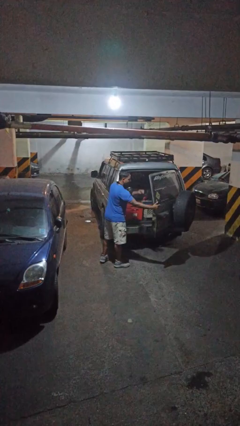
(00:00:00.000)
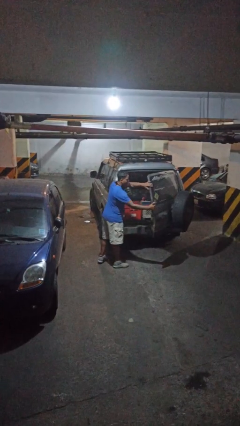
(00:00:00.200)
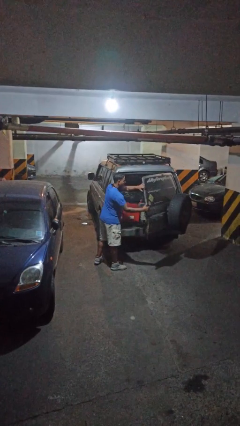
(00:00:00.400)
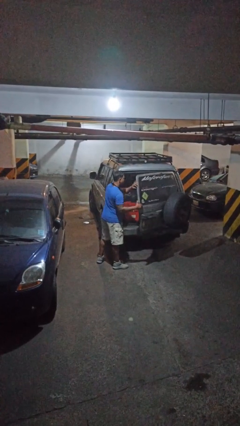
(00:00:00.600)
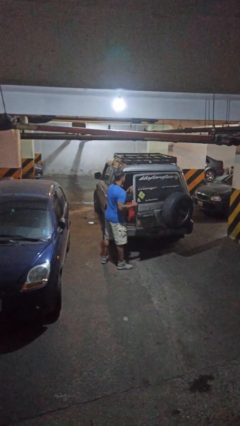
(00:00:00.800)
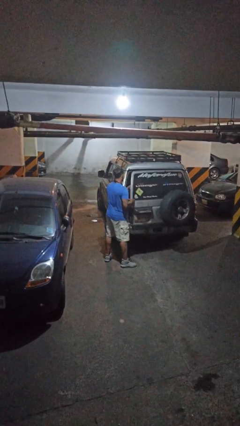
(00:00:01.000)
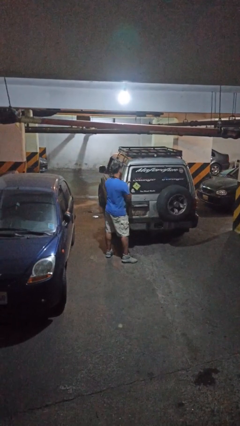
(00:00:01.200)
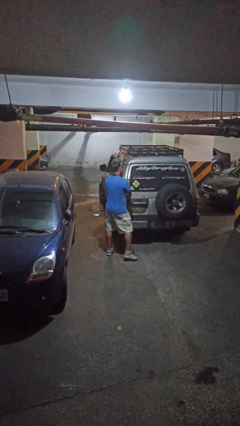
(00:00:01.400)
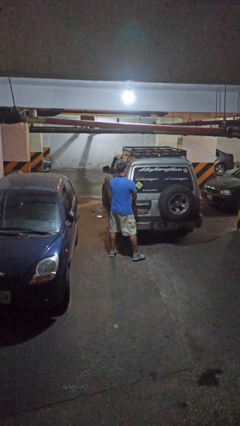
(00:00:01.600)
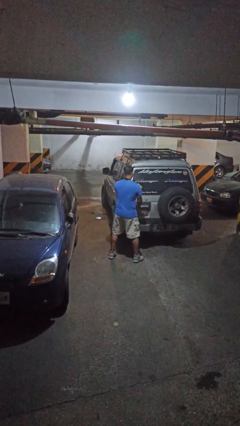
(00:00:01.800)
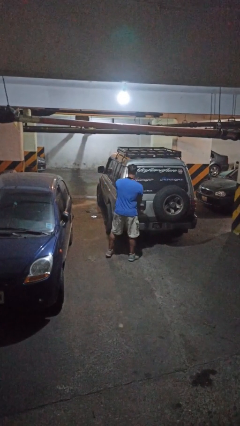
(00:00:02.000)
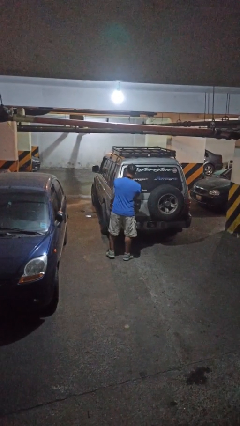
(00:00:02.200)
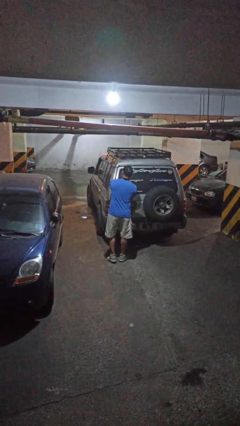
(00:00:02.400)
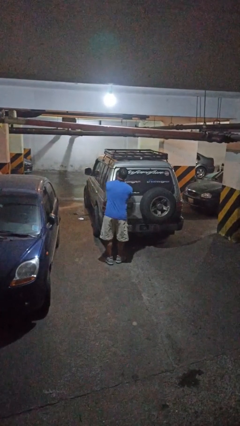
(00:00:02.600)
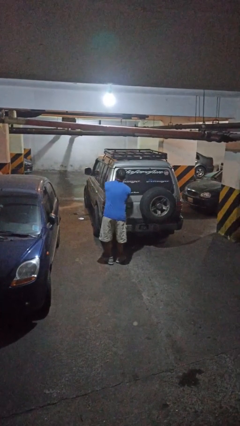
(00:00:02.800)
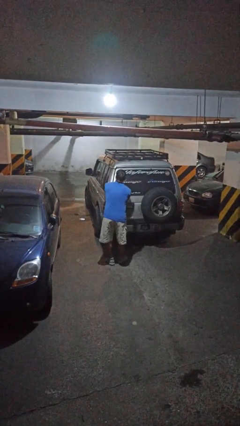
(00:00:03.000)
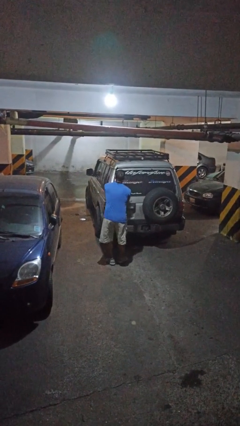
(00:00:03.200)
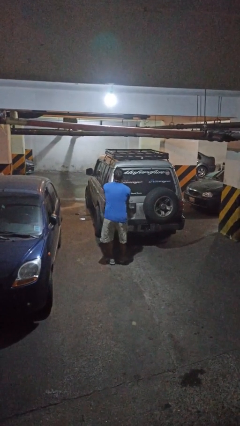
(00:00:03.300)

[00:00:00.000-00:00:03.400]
person closes car trunk

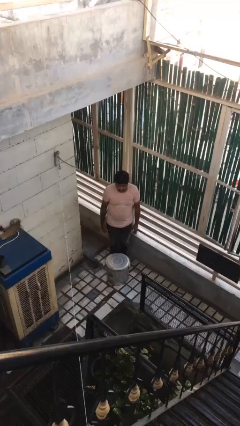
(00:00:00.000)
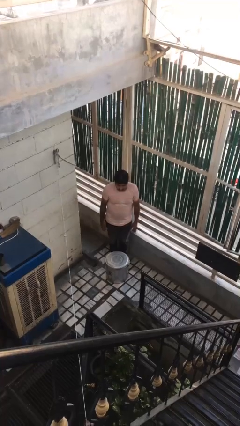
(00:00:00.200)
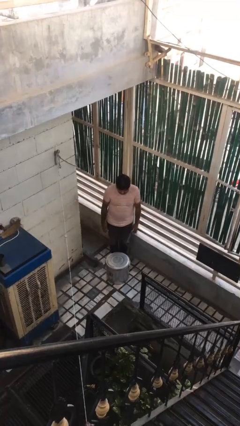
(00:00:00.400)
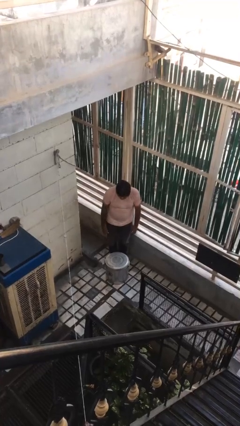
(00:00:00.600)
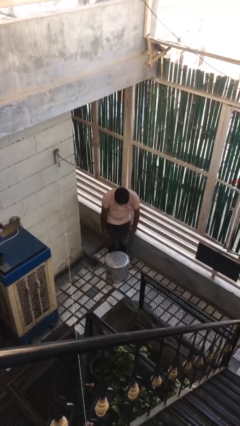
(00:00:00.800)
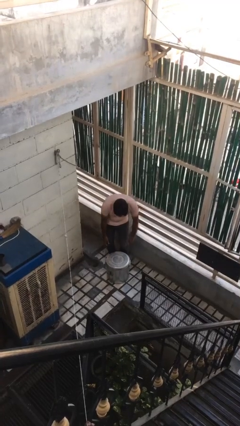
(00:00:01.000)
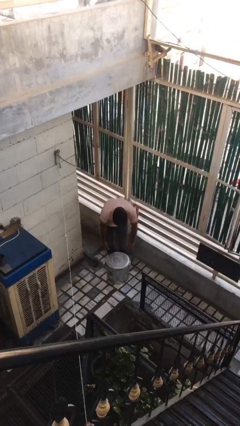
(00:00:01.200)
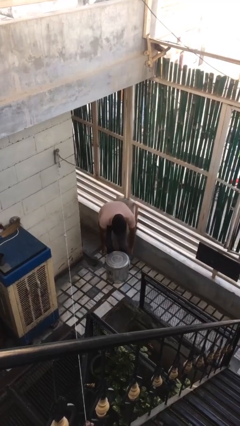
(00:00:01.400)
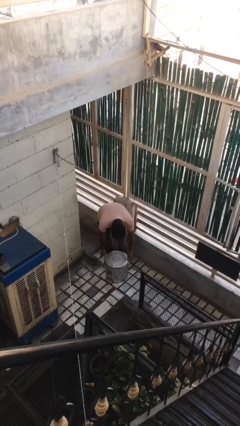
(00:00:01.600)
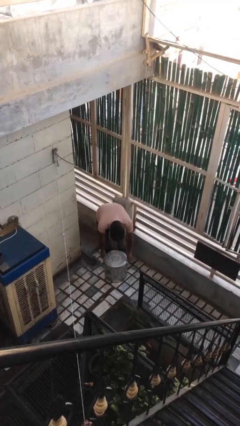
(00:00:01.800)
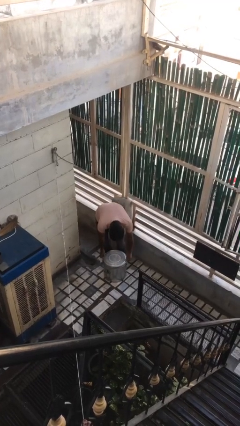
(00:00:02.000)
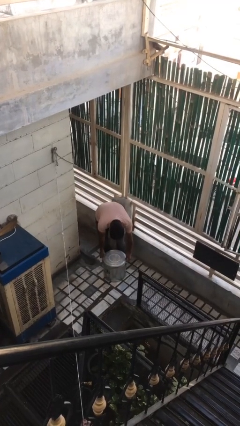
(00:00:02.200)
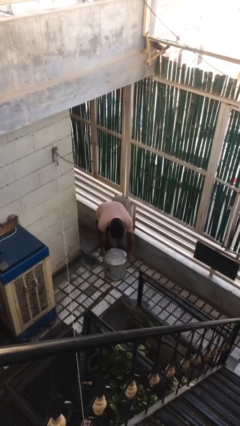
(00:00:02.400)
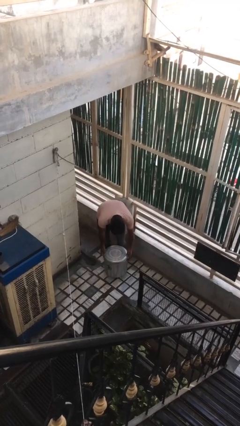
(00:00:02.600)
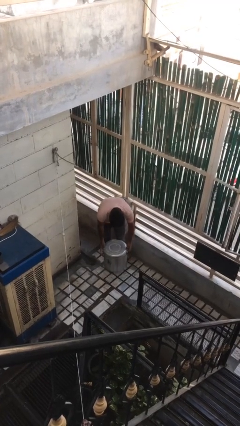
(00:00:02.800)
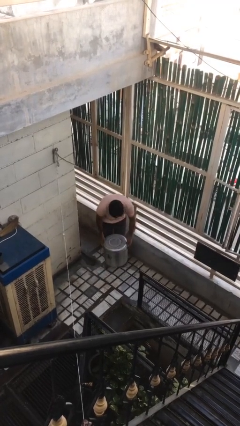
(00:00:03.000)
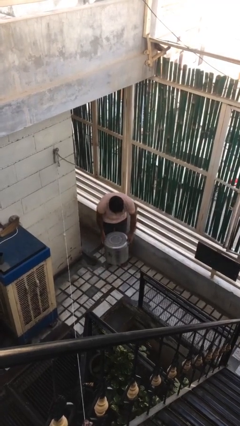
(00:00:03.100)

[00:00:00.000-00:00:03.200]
person picks up object from floor

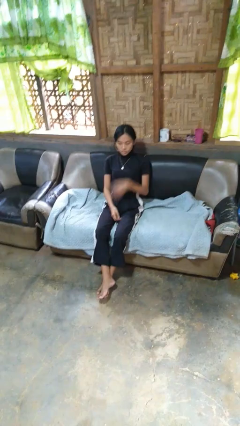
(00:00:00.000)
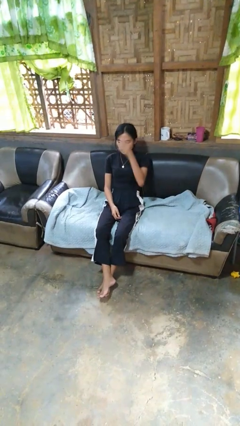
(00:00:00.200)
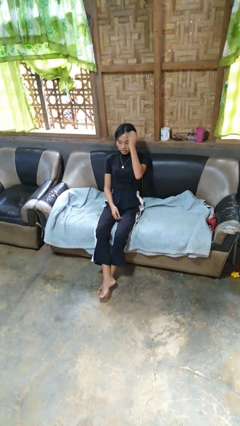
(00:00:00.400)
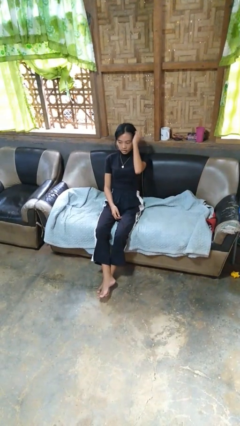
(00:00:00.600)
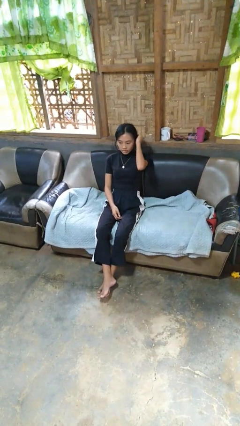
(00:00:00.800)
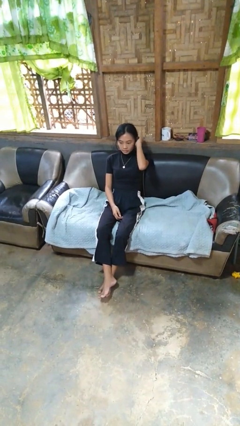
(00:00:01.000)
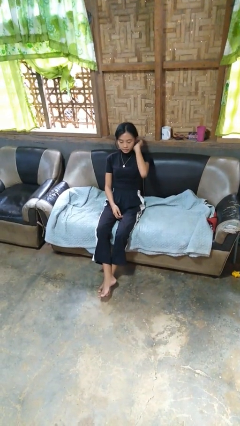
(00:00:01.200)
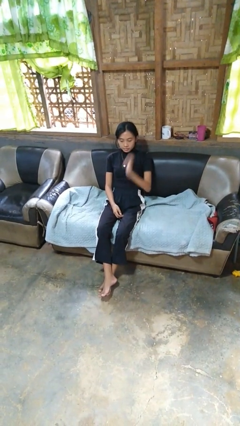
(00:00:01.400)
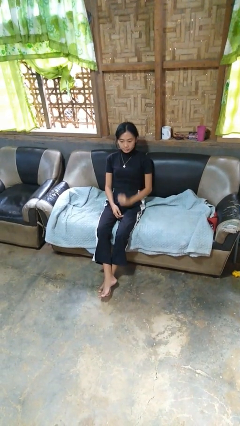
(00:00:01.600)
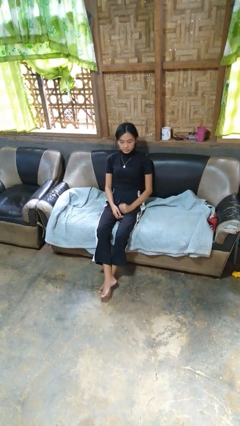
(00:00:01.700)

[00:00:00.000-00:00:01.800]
person strokes hair

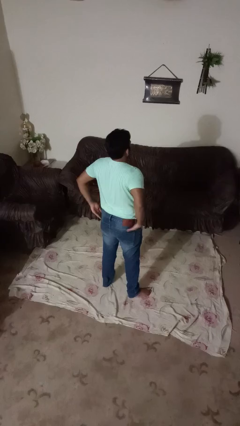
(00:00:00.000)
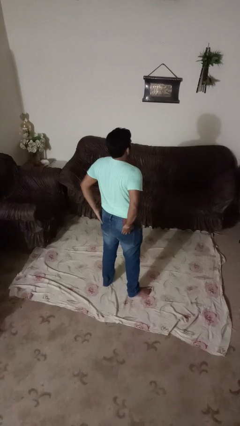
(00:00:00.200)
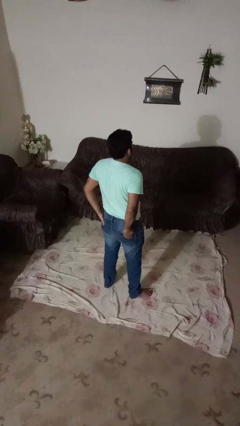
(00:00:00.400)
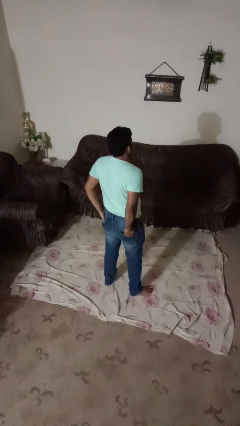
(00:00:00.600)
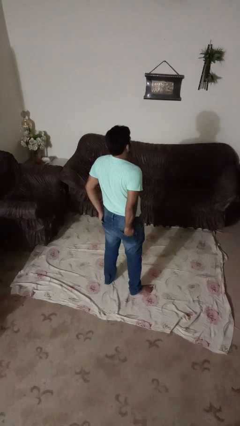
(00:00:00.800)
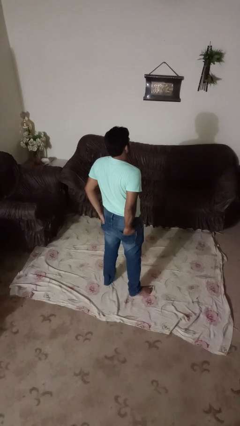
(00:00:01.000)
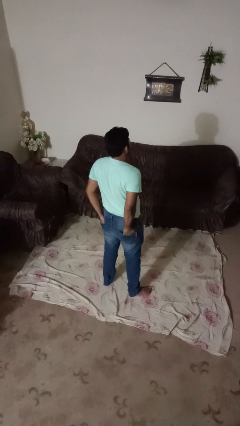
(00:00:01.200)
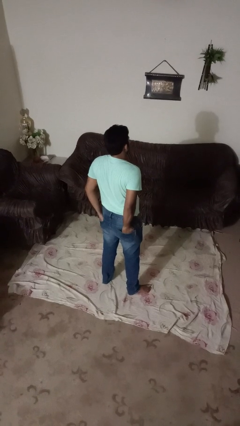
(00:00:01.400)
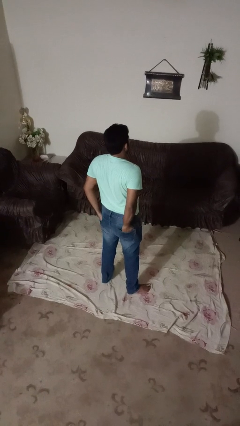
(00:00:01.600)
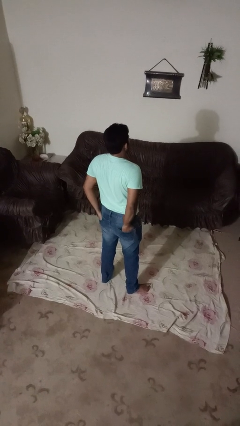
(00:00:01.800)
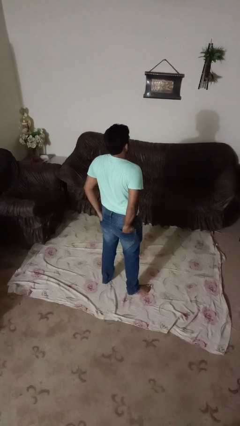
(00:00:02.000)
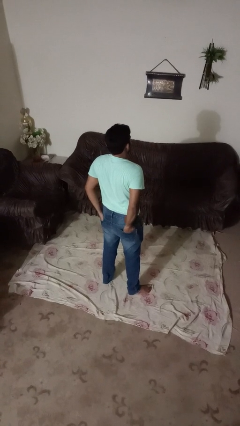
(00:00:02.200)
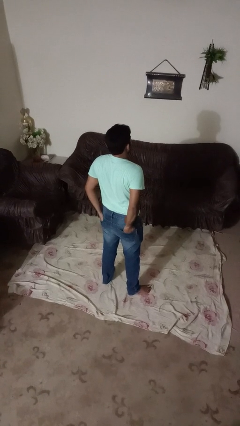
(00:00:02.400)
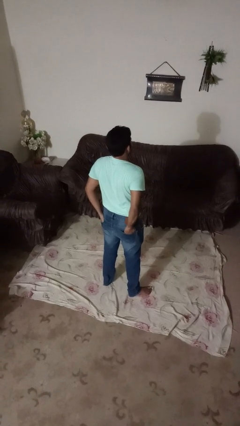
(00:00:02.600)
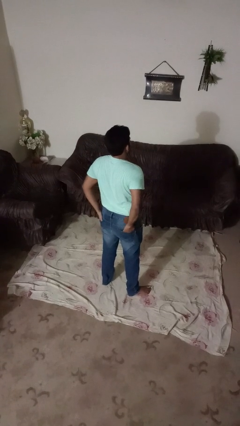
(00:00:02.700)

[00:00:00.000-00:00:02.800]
person puts hands in back pockets

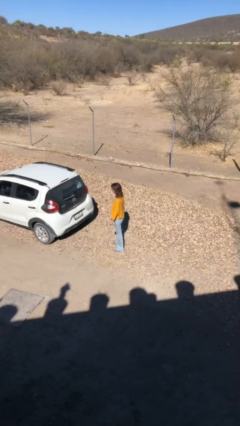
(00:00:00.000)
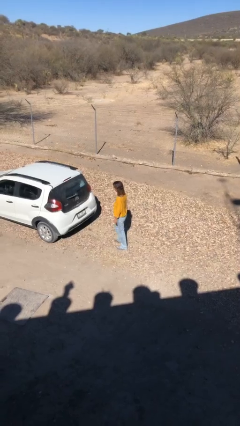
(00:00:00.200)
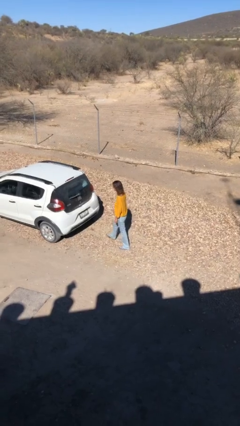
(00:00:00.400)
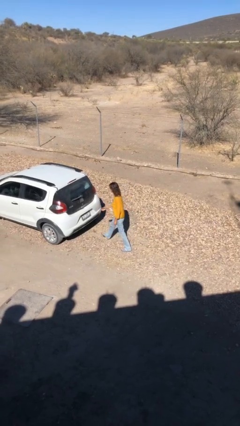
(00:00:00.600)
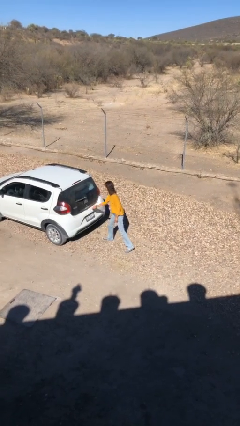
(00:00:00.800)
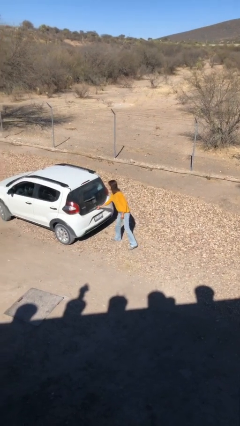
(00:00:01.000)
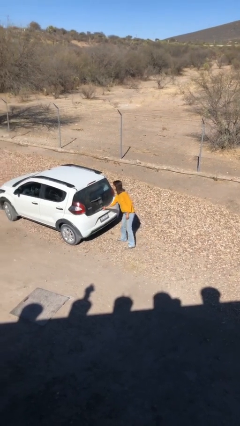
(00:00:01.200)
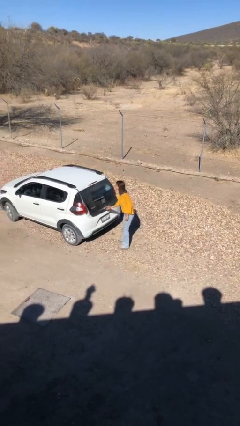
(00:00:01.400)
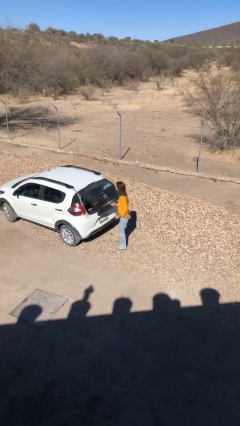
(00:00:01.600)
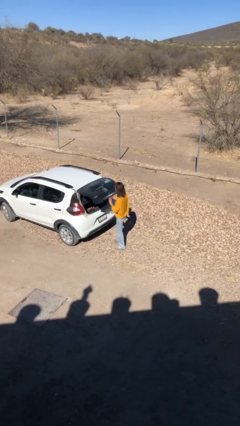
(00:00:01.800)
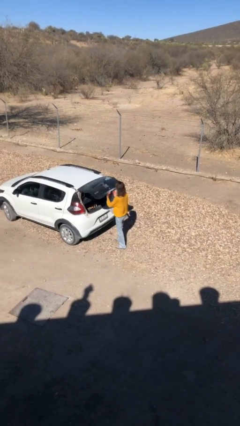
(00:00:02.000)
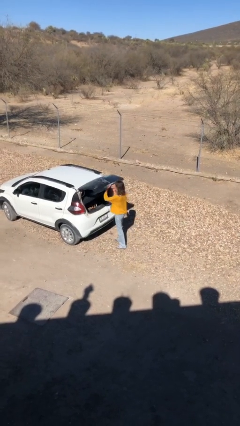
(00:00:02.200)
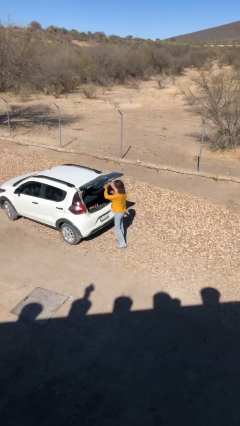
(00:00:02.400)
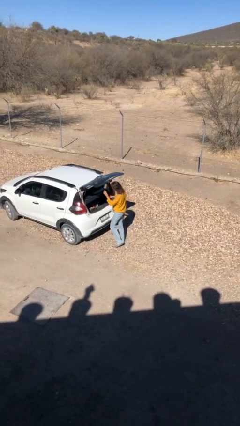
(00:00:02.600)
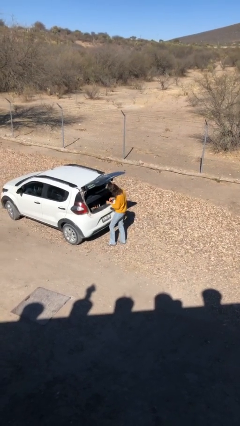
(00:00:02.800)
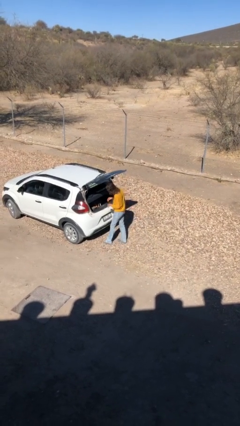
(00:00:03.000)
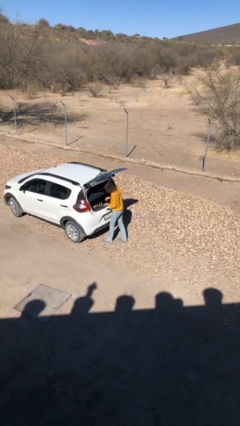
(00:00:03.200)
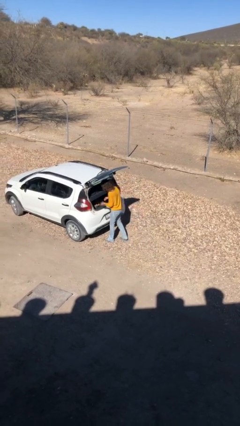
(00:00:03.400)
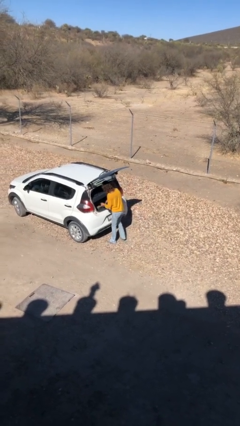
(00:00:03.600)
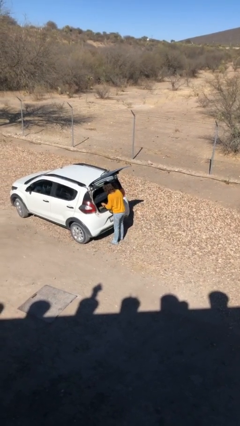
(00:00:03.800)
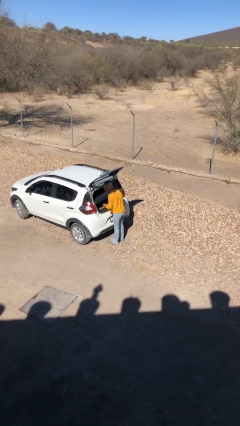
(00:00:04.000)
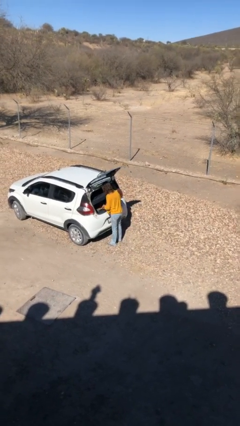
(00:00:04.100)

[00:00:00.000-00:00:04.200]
person opens car trunk

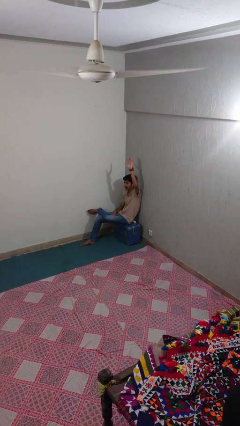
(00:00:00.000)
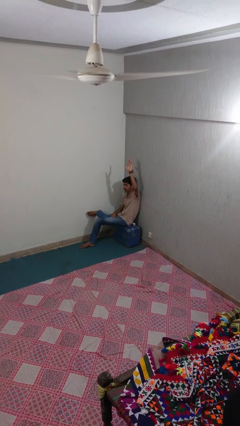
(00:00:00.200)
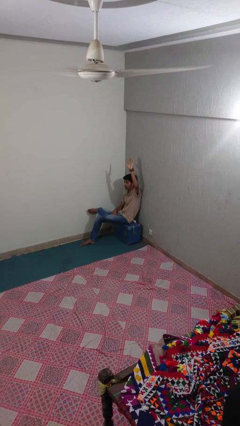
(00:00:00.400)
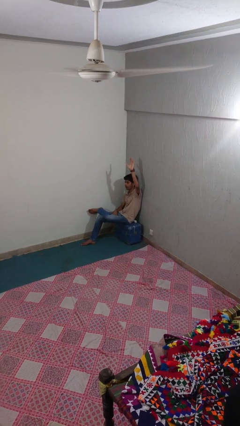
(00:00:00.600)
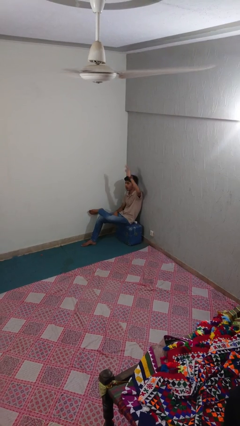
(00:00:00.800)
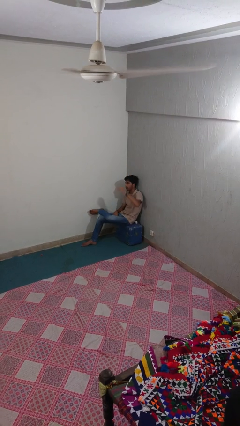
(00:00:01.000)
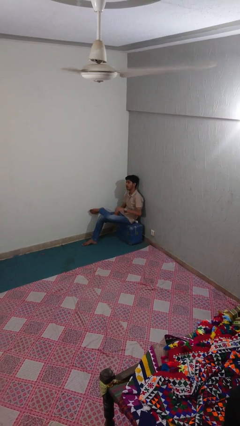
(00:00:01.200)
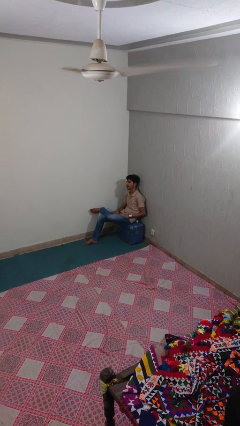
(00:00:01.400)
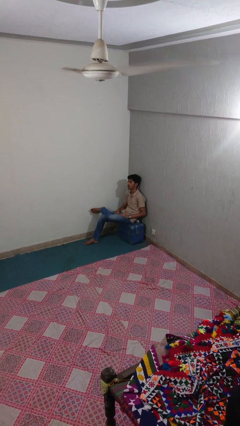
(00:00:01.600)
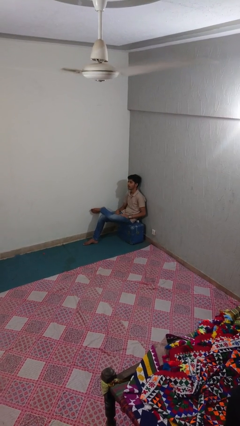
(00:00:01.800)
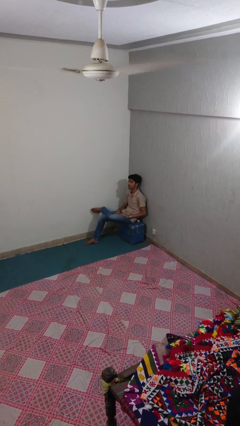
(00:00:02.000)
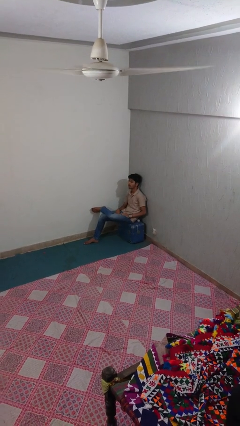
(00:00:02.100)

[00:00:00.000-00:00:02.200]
person gestures lower hand
